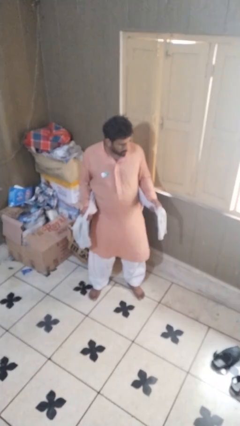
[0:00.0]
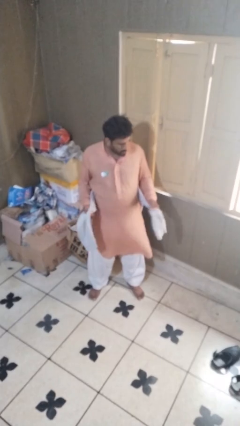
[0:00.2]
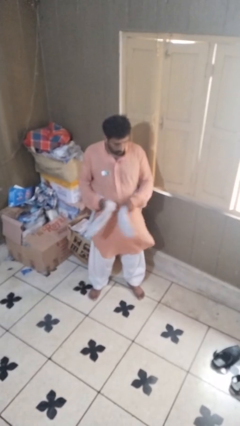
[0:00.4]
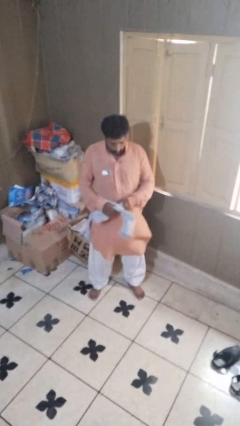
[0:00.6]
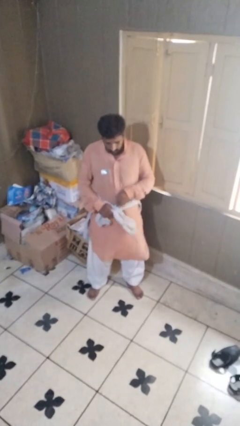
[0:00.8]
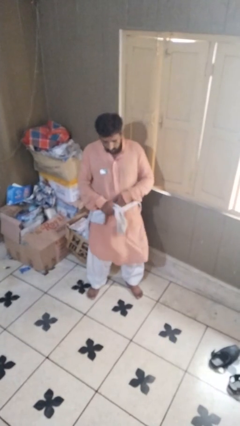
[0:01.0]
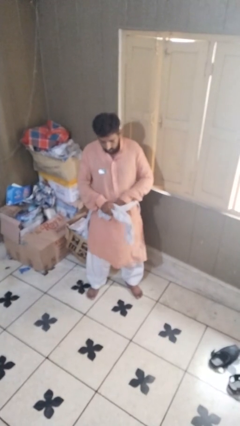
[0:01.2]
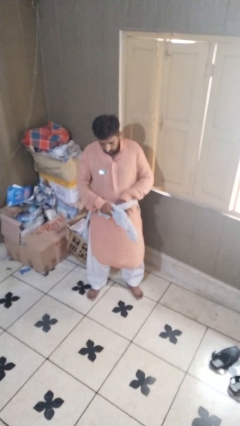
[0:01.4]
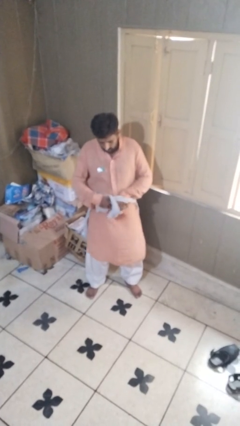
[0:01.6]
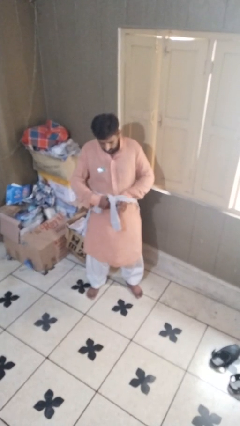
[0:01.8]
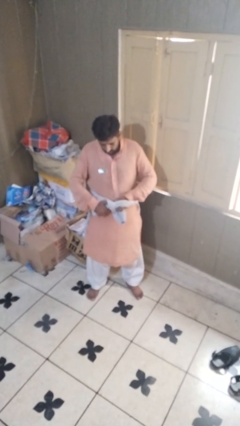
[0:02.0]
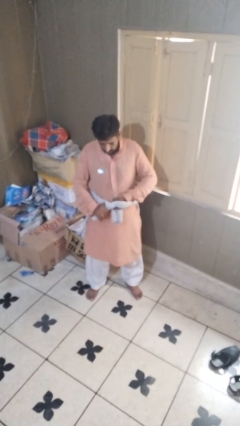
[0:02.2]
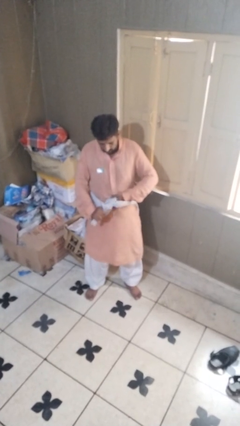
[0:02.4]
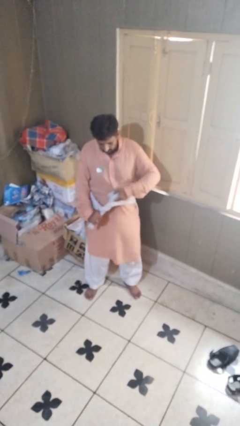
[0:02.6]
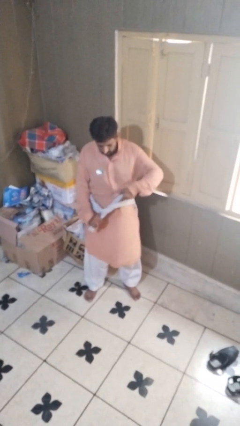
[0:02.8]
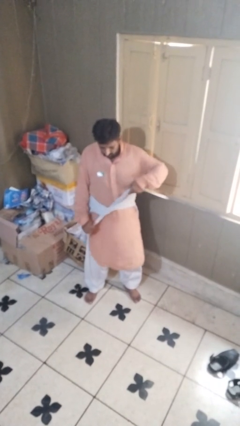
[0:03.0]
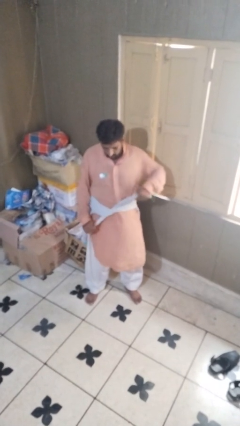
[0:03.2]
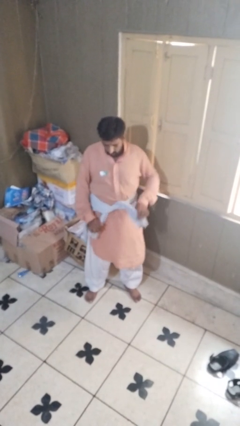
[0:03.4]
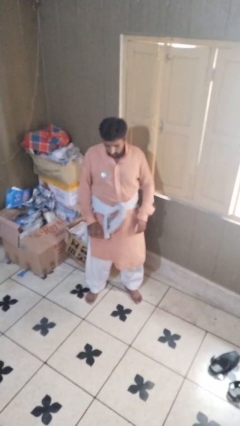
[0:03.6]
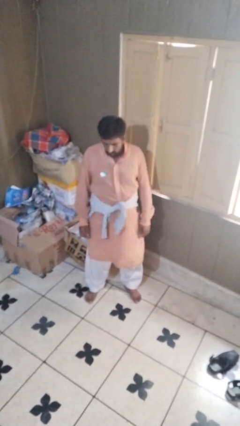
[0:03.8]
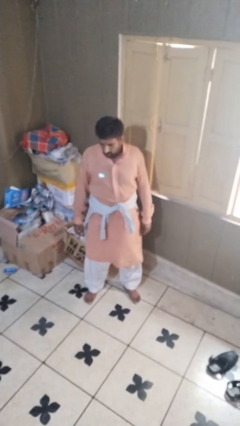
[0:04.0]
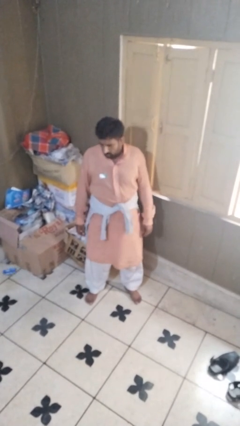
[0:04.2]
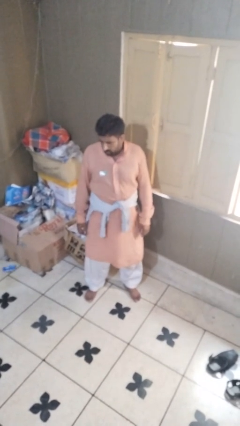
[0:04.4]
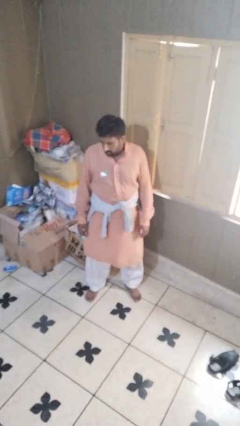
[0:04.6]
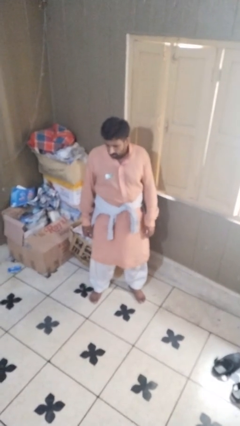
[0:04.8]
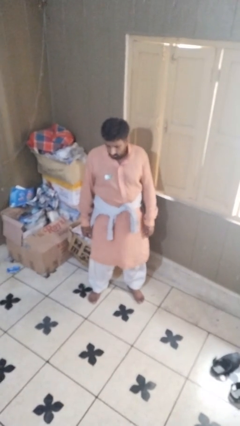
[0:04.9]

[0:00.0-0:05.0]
person ties jacket around waist

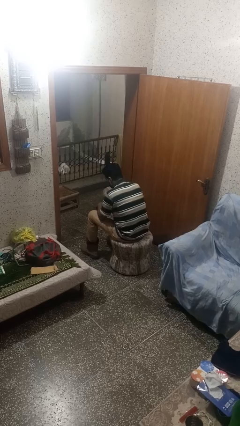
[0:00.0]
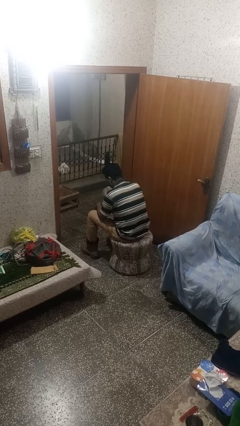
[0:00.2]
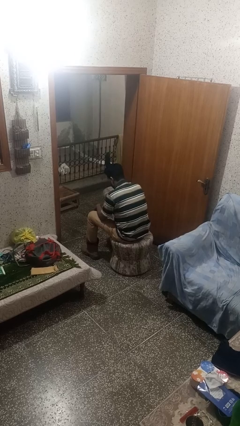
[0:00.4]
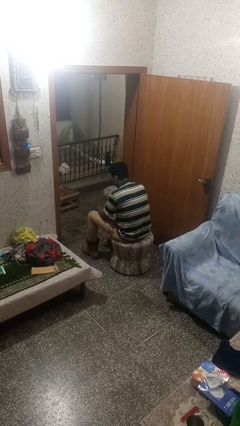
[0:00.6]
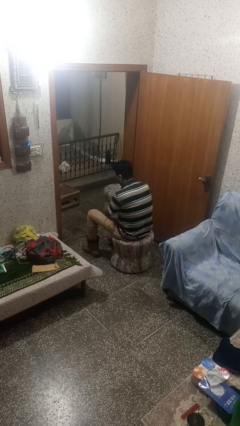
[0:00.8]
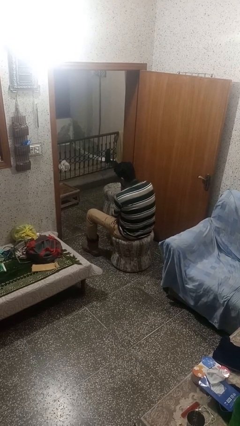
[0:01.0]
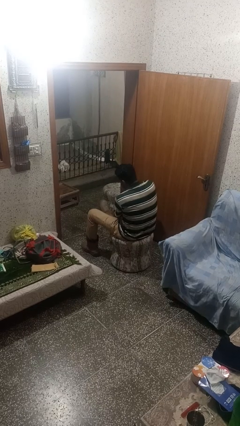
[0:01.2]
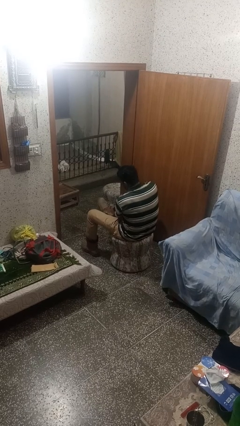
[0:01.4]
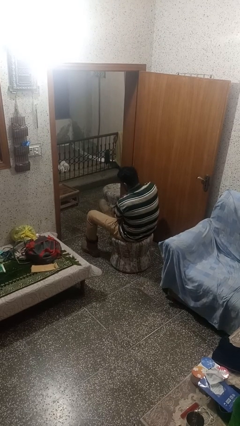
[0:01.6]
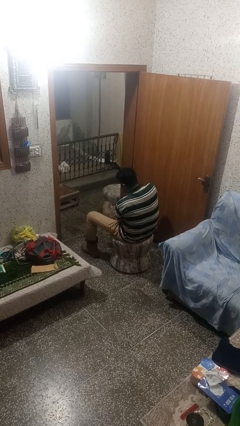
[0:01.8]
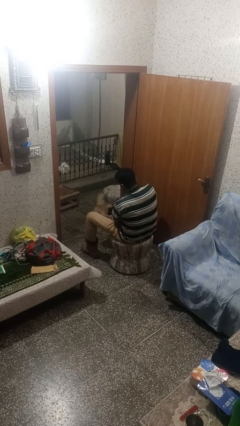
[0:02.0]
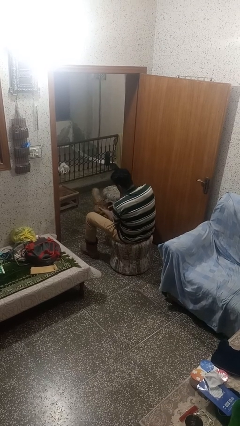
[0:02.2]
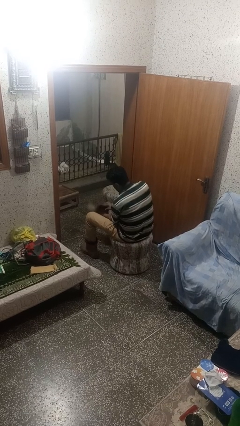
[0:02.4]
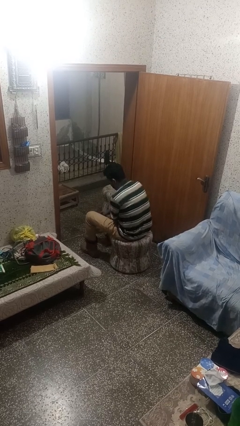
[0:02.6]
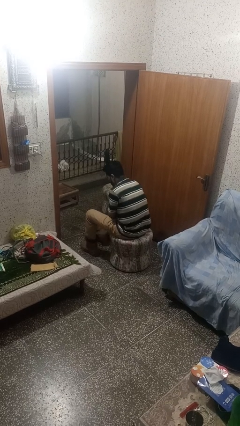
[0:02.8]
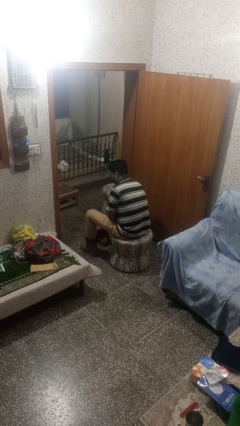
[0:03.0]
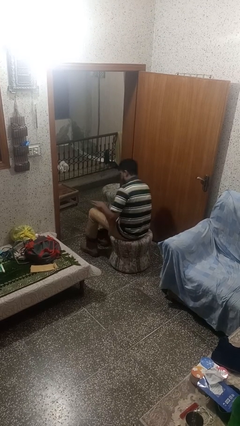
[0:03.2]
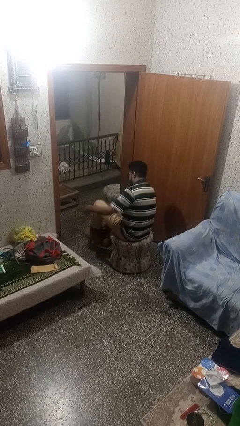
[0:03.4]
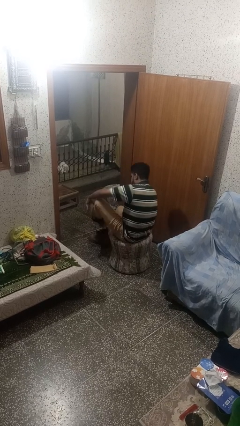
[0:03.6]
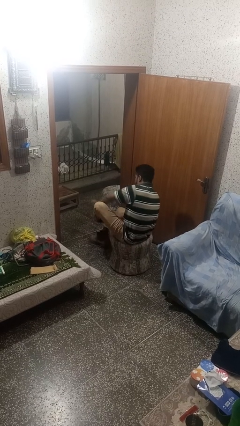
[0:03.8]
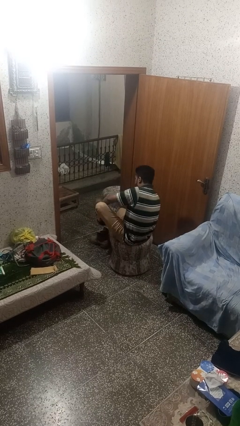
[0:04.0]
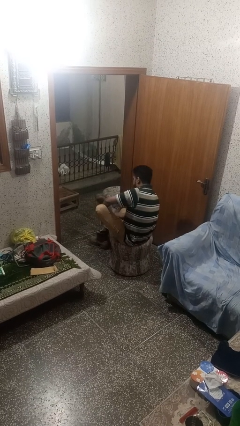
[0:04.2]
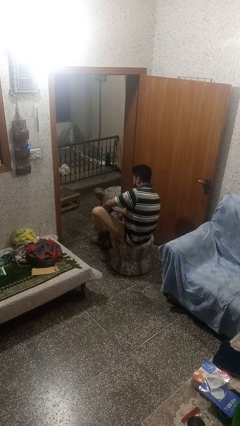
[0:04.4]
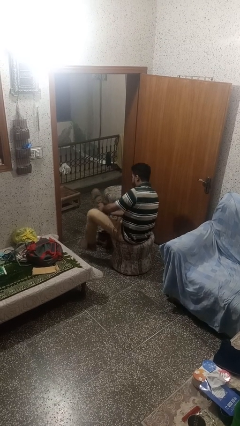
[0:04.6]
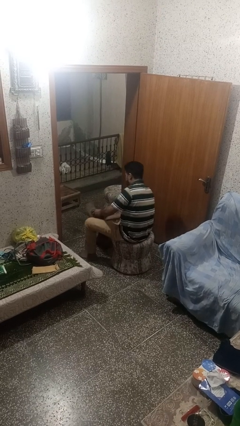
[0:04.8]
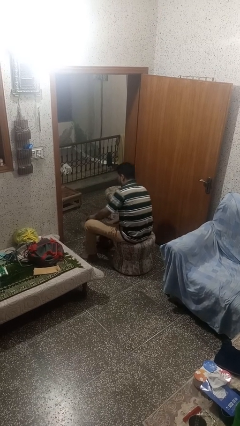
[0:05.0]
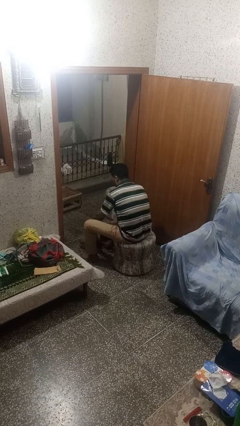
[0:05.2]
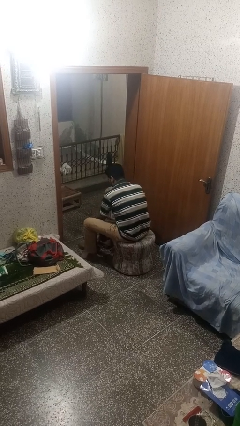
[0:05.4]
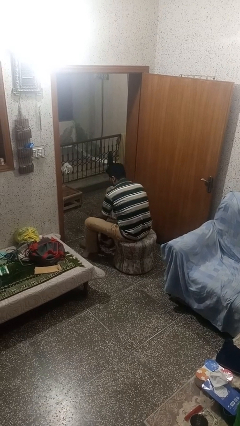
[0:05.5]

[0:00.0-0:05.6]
person takes off shoes

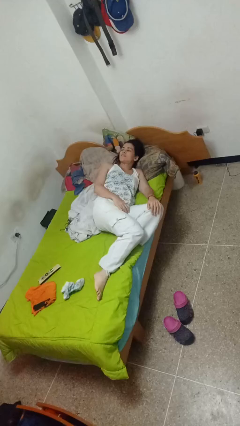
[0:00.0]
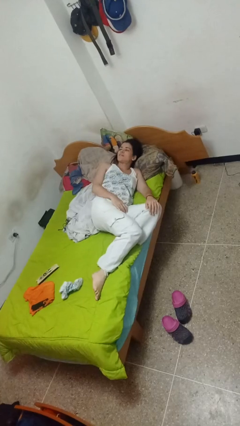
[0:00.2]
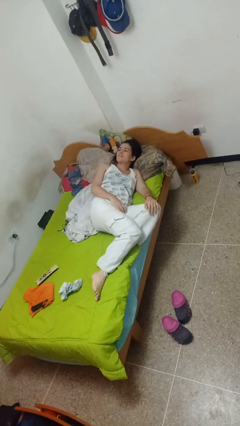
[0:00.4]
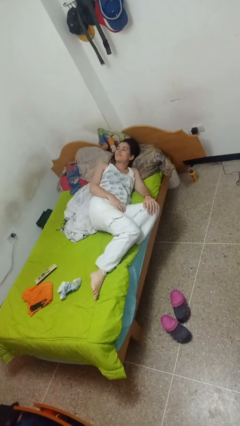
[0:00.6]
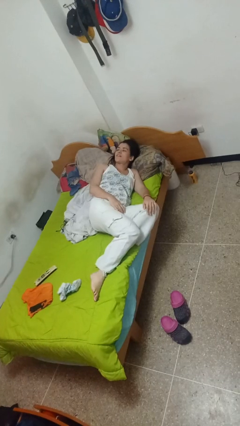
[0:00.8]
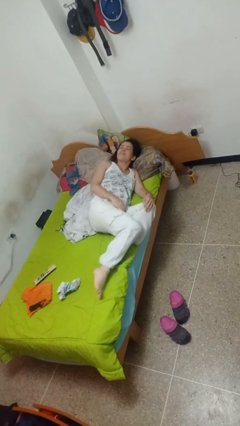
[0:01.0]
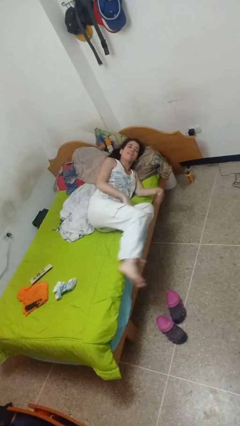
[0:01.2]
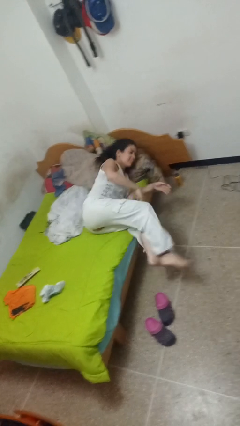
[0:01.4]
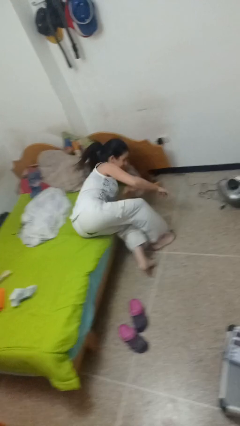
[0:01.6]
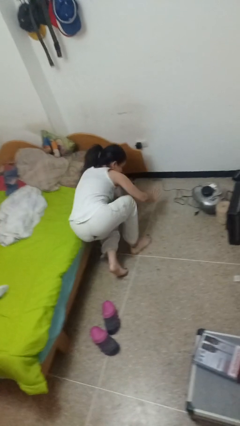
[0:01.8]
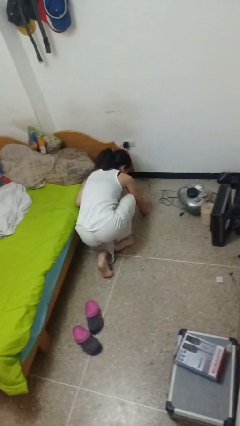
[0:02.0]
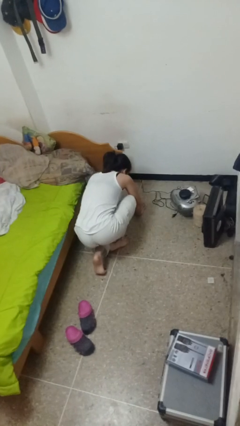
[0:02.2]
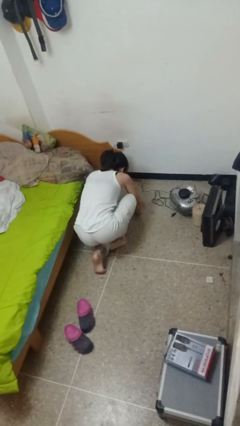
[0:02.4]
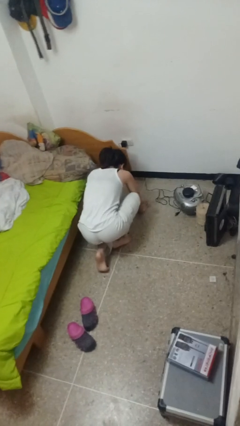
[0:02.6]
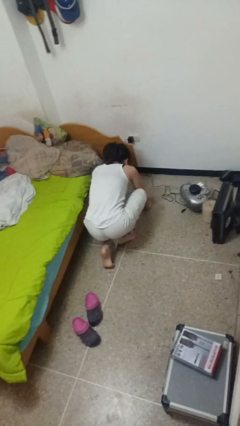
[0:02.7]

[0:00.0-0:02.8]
person falls from bed

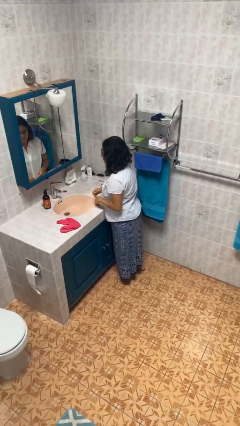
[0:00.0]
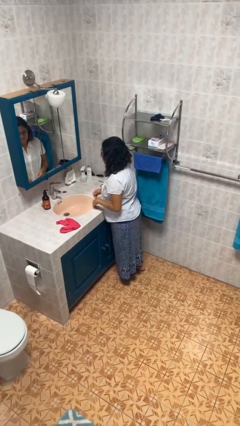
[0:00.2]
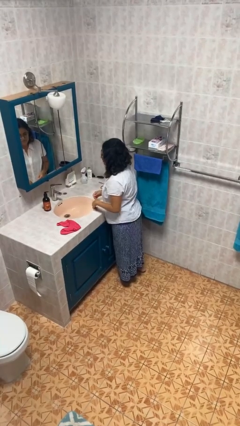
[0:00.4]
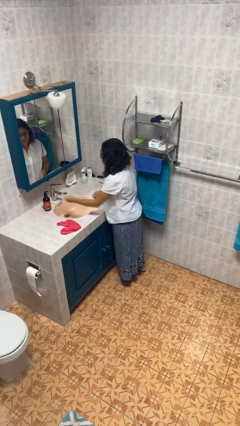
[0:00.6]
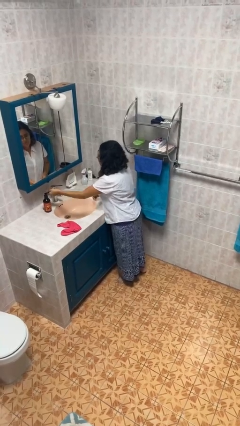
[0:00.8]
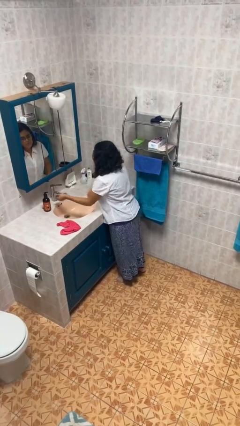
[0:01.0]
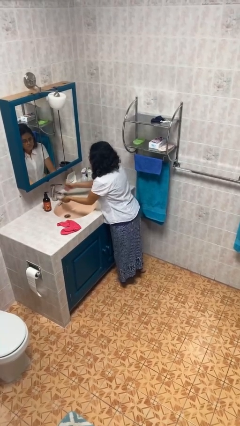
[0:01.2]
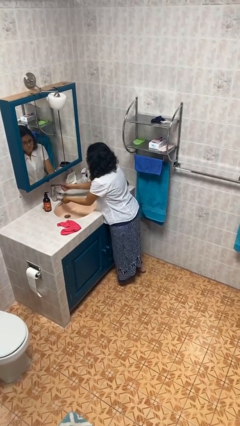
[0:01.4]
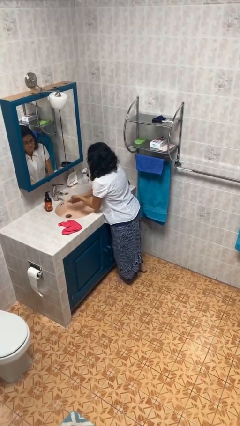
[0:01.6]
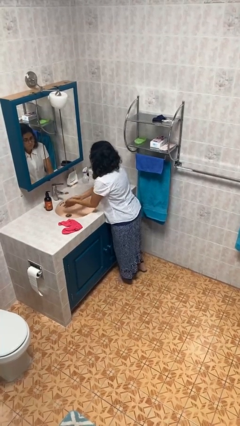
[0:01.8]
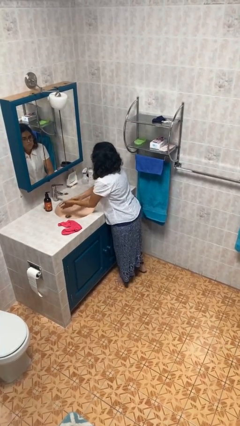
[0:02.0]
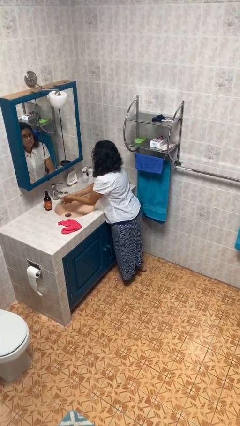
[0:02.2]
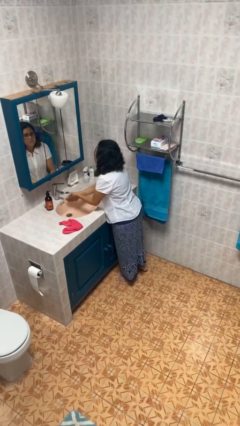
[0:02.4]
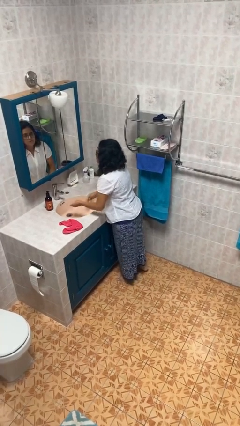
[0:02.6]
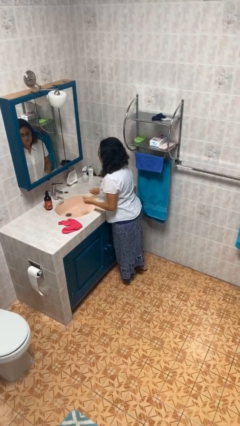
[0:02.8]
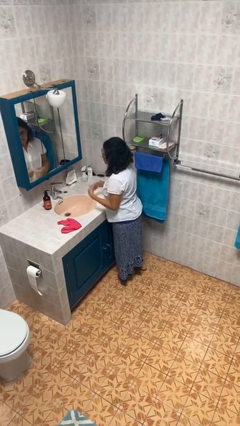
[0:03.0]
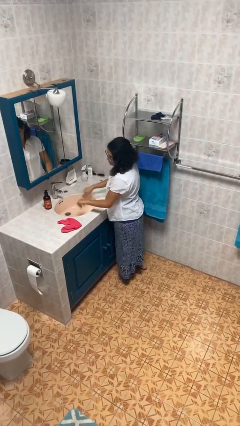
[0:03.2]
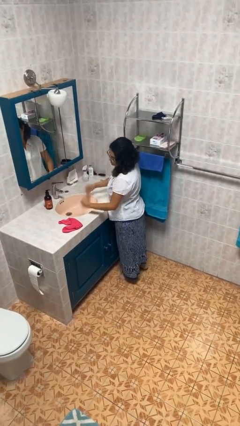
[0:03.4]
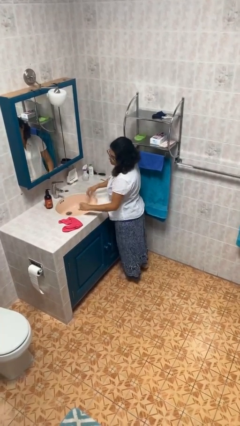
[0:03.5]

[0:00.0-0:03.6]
person washes hands

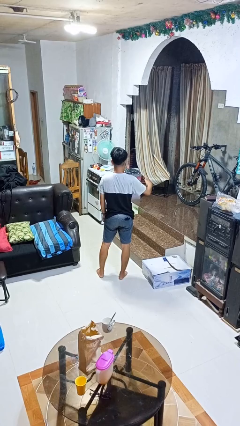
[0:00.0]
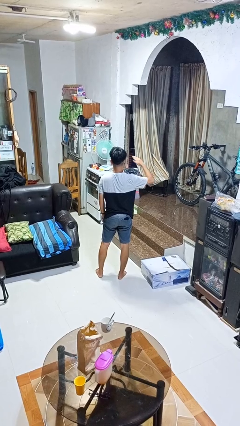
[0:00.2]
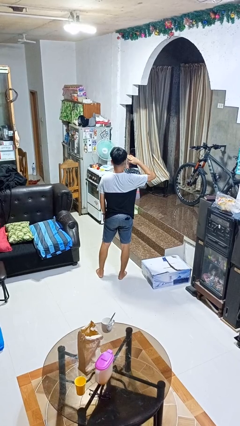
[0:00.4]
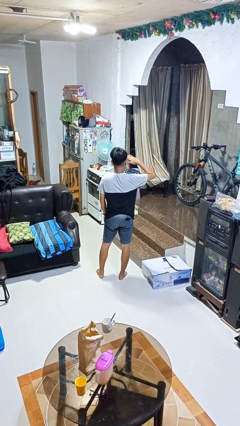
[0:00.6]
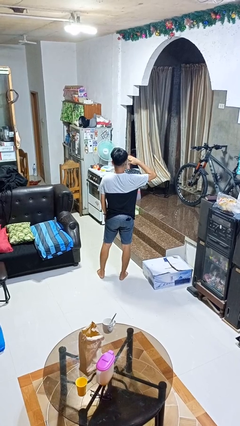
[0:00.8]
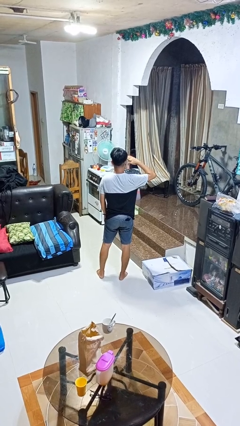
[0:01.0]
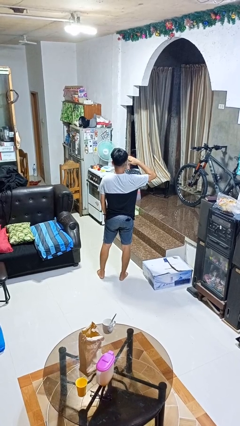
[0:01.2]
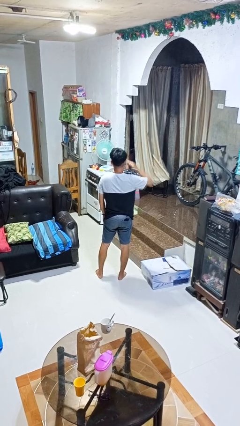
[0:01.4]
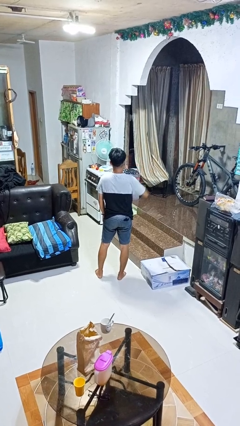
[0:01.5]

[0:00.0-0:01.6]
person salutes
